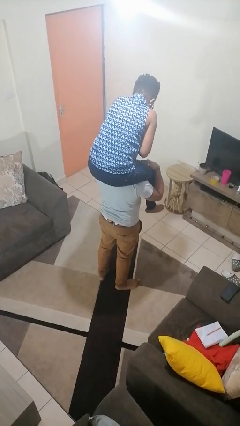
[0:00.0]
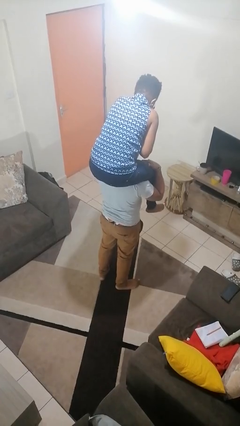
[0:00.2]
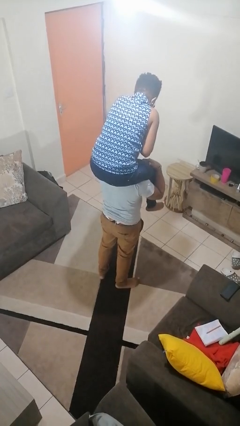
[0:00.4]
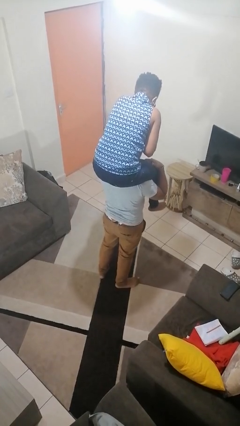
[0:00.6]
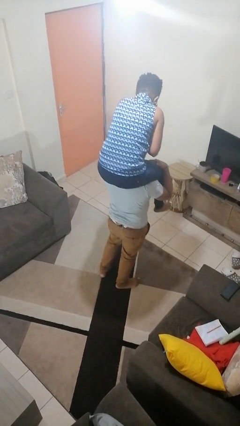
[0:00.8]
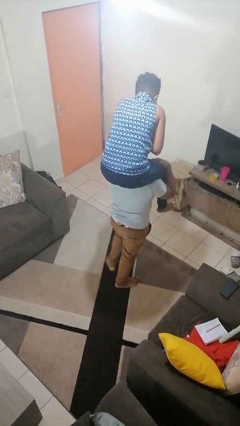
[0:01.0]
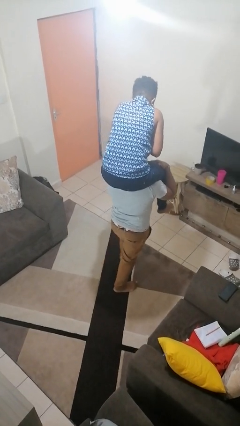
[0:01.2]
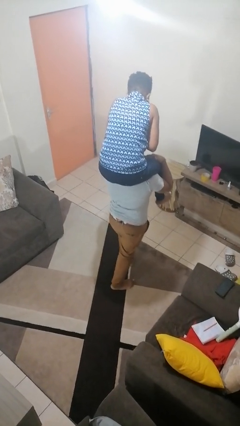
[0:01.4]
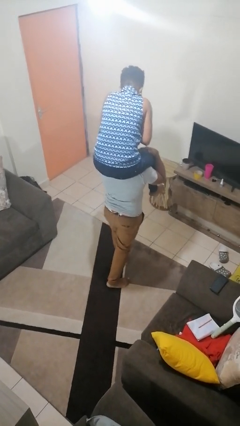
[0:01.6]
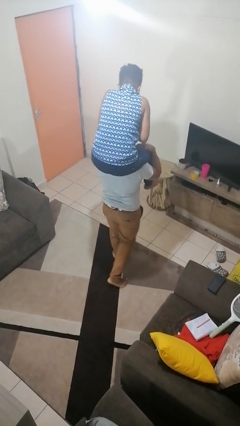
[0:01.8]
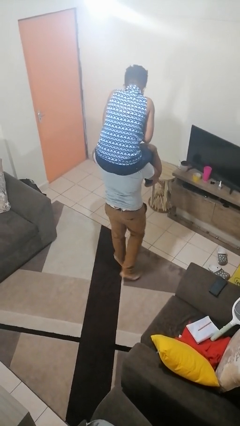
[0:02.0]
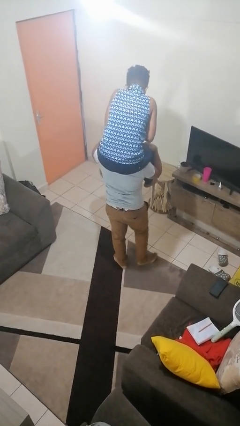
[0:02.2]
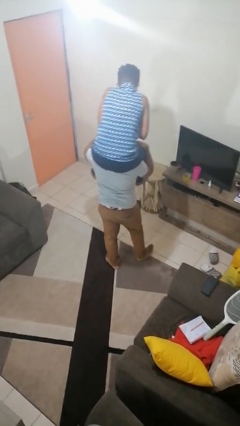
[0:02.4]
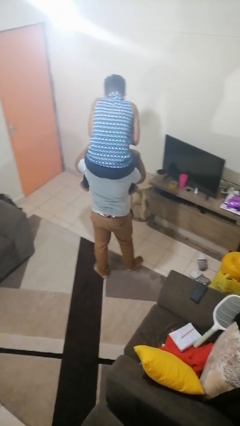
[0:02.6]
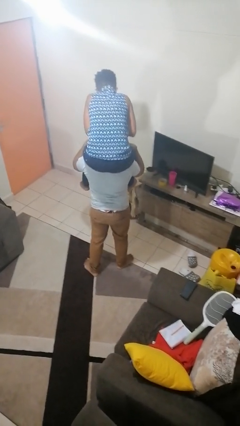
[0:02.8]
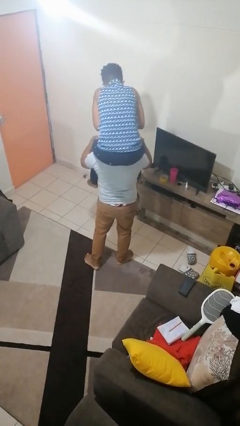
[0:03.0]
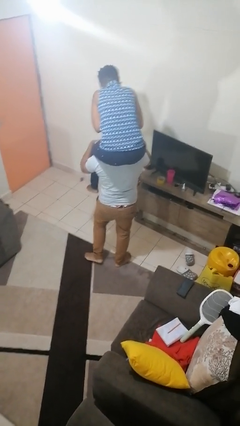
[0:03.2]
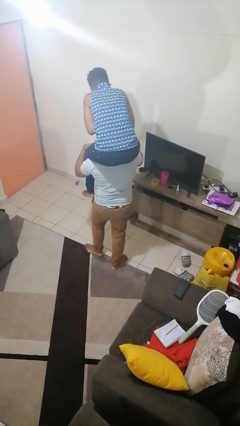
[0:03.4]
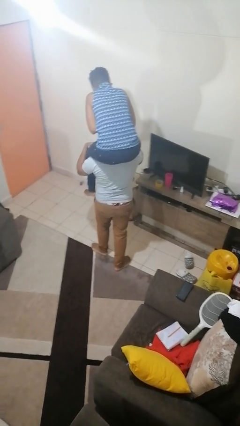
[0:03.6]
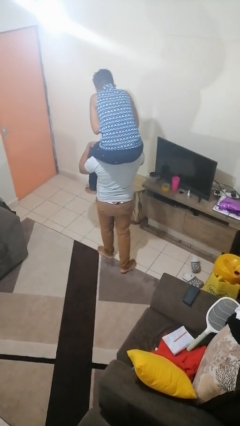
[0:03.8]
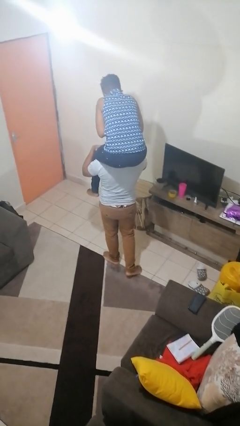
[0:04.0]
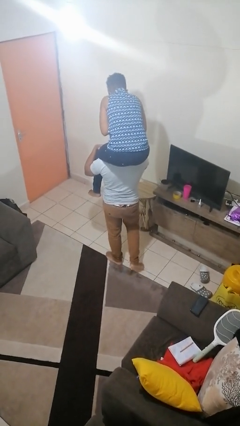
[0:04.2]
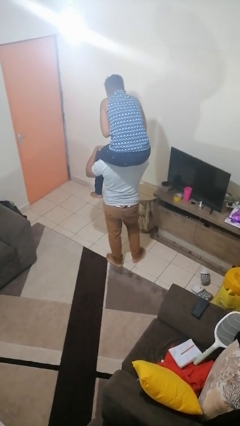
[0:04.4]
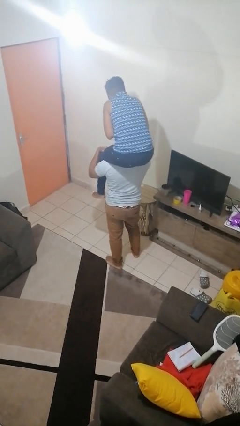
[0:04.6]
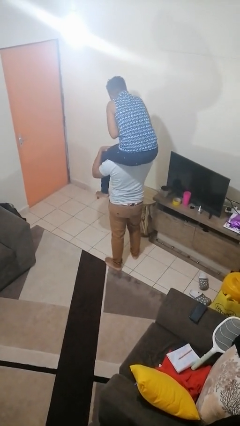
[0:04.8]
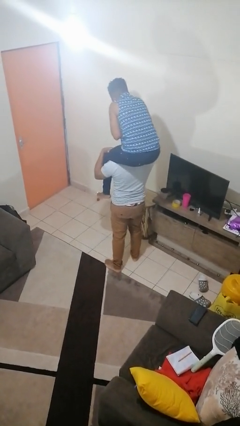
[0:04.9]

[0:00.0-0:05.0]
person carries person on shoulders

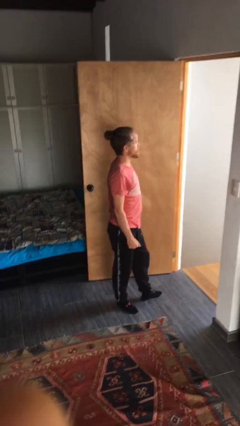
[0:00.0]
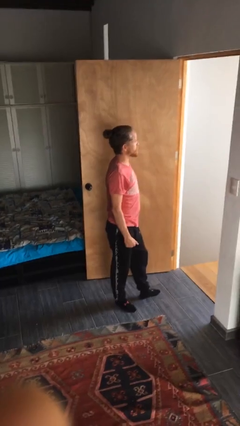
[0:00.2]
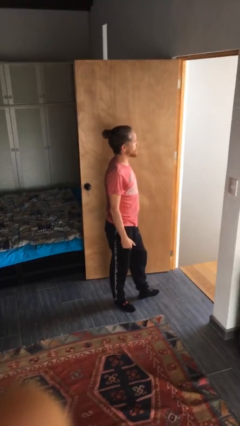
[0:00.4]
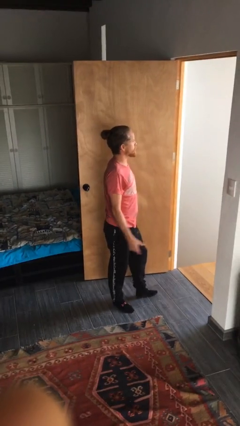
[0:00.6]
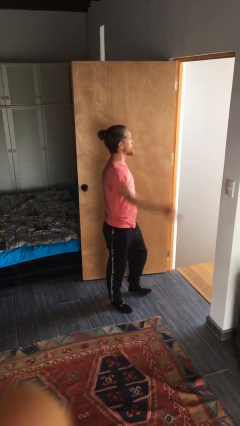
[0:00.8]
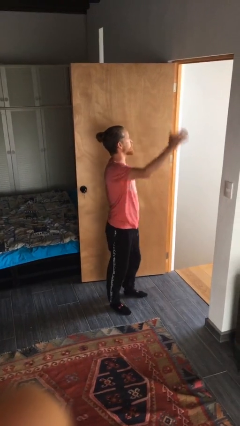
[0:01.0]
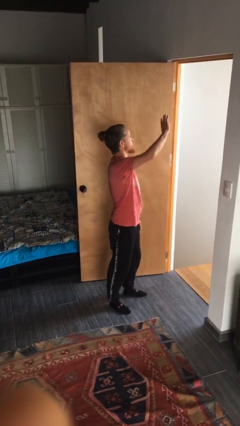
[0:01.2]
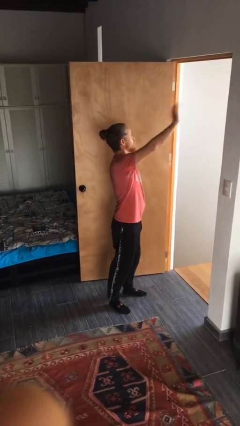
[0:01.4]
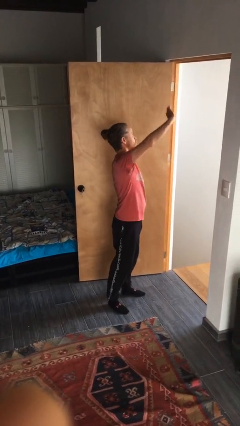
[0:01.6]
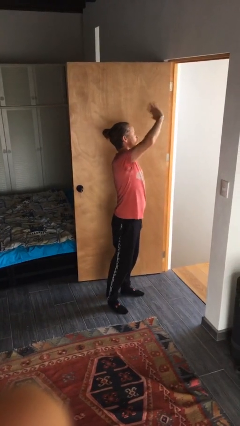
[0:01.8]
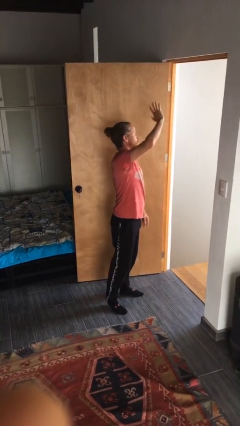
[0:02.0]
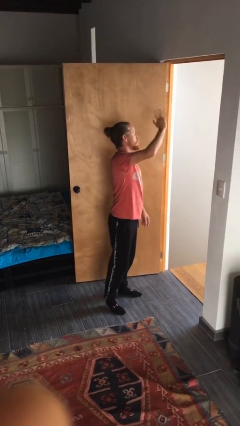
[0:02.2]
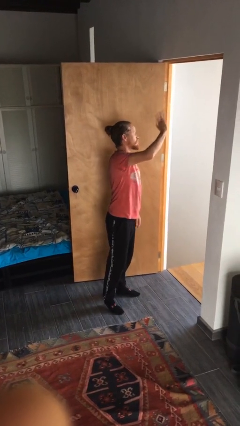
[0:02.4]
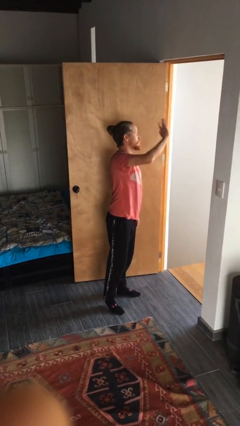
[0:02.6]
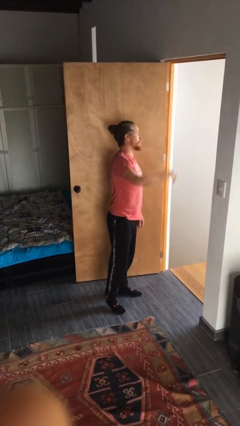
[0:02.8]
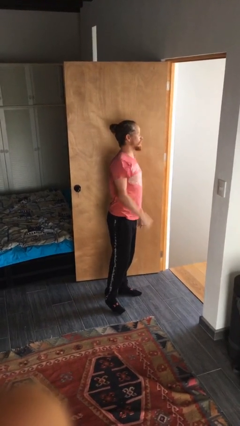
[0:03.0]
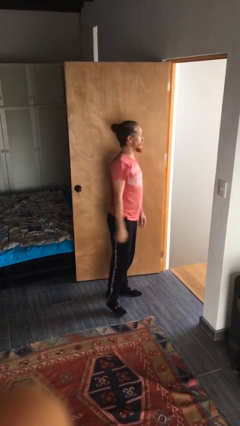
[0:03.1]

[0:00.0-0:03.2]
person waves at person

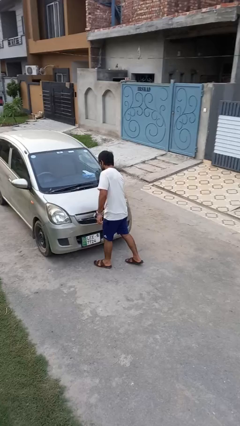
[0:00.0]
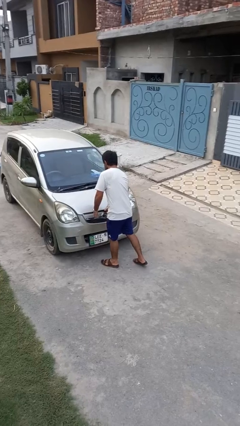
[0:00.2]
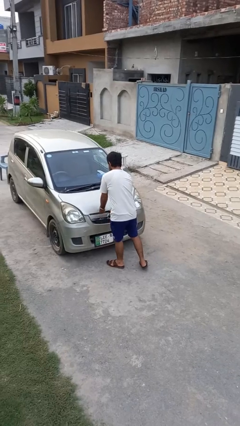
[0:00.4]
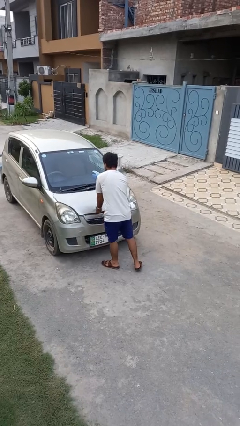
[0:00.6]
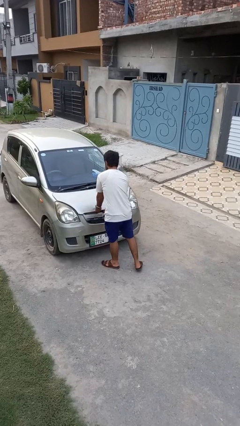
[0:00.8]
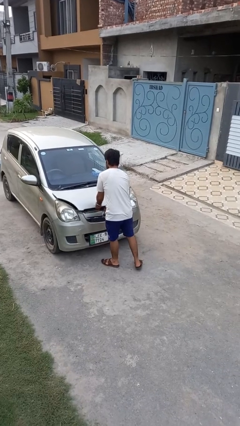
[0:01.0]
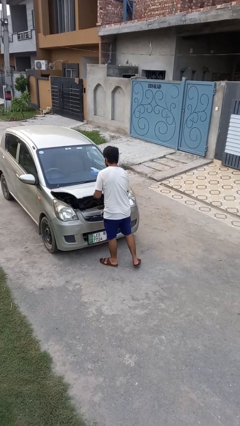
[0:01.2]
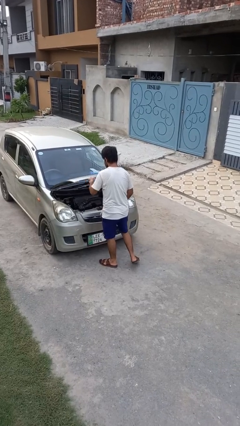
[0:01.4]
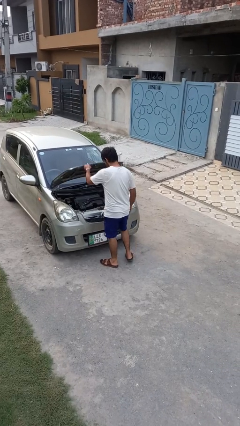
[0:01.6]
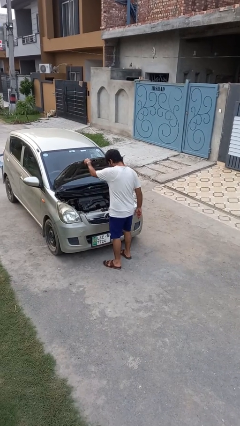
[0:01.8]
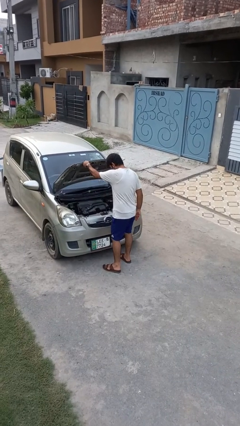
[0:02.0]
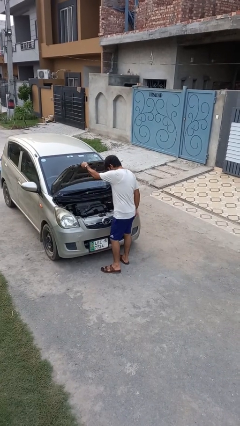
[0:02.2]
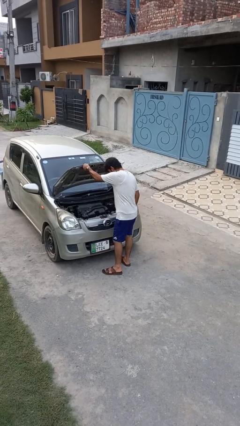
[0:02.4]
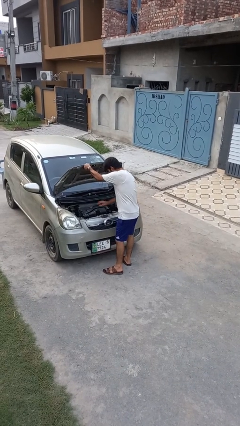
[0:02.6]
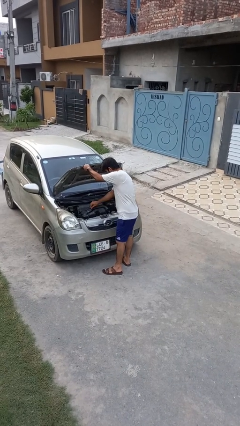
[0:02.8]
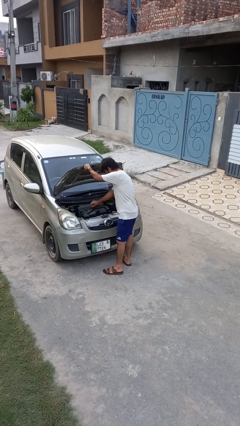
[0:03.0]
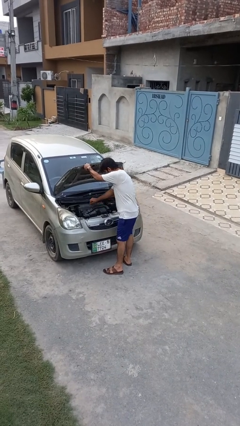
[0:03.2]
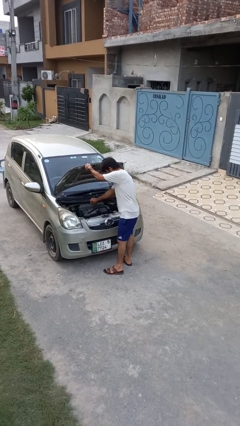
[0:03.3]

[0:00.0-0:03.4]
person opens car hood

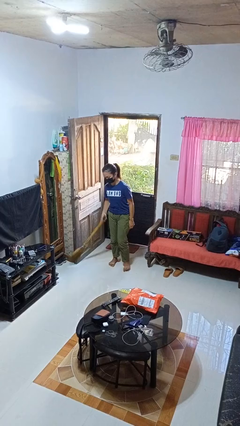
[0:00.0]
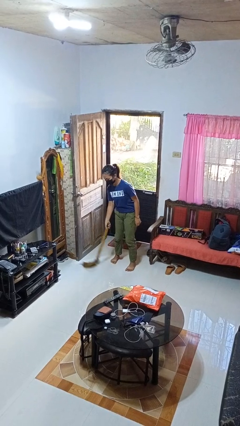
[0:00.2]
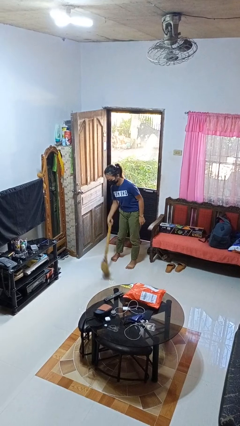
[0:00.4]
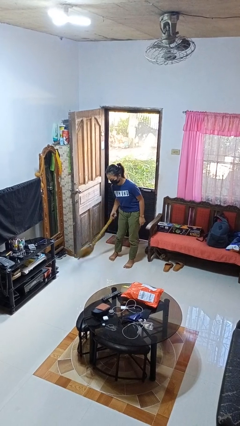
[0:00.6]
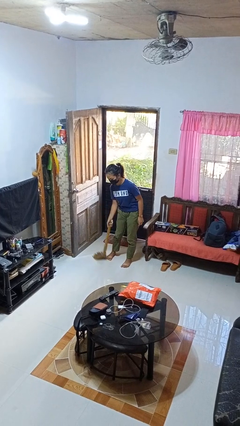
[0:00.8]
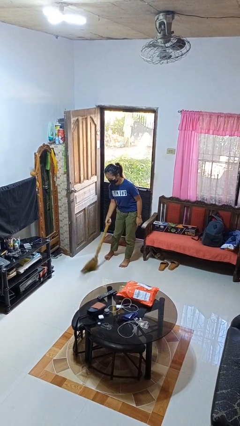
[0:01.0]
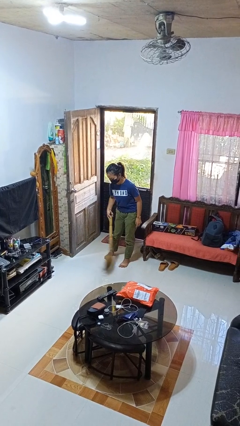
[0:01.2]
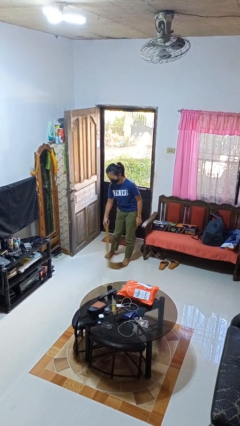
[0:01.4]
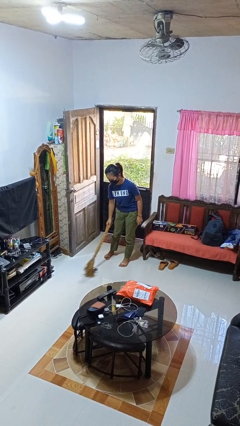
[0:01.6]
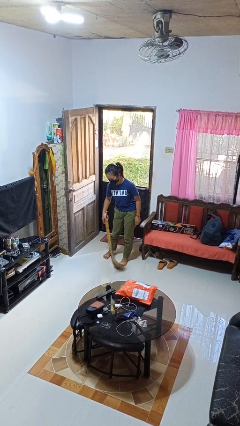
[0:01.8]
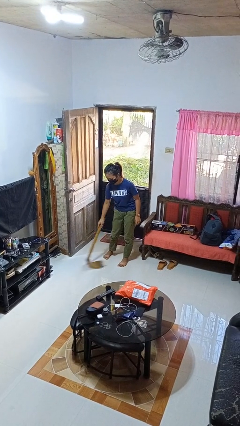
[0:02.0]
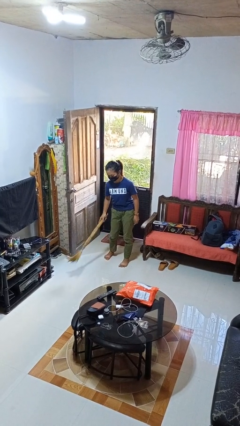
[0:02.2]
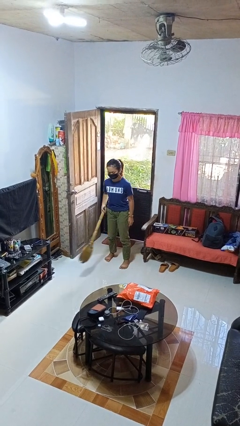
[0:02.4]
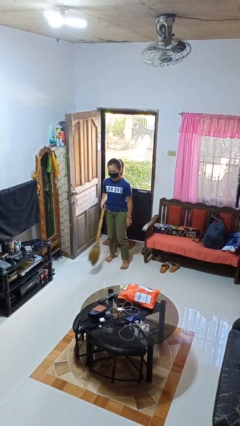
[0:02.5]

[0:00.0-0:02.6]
person sweeps floor

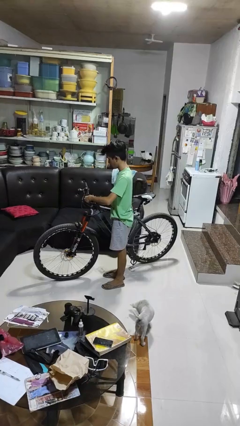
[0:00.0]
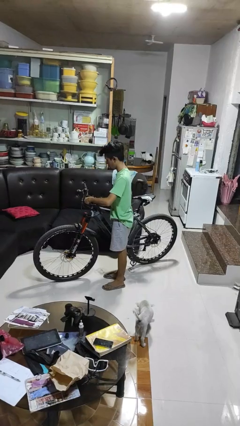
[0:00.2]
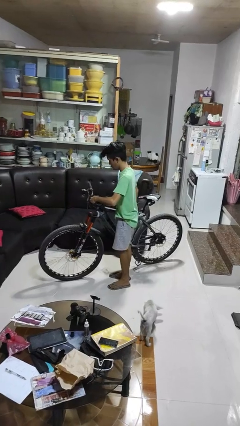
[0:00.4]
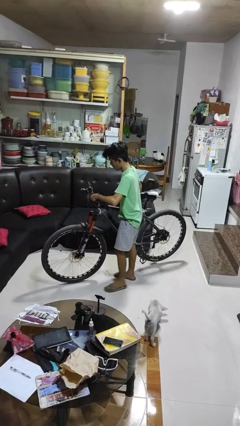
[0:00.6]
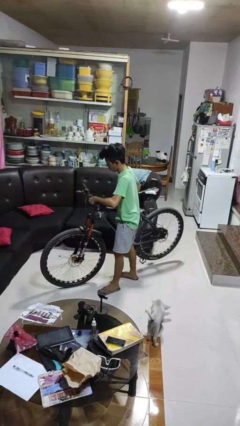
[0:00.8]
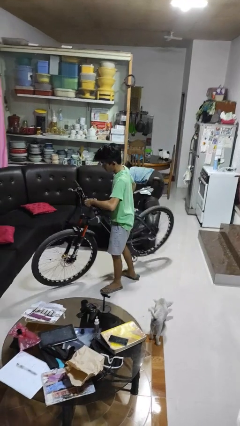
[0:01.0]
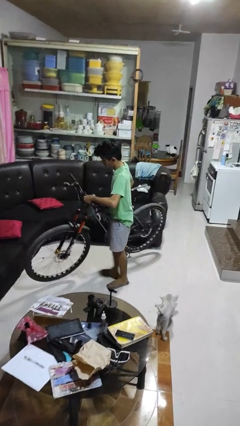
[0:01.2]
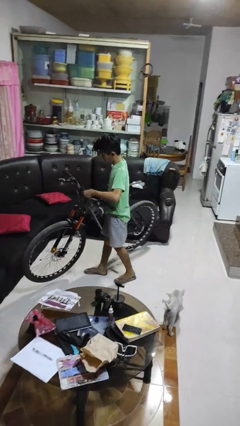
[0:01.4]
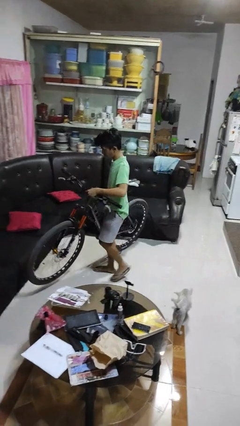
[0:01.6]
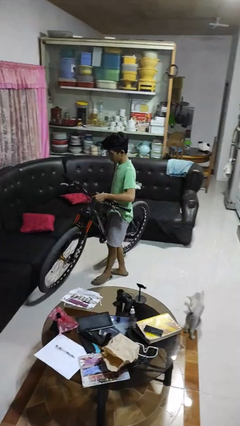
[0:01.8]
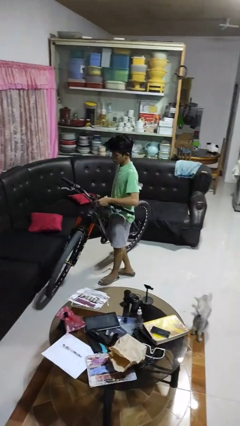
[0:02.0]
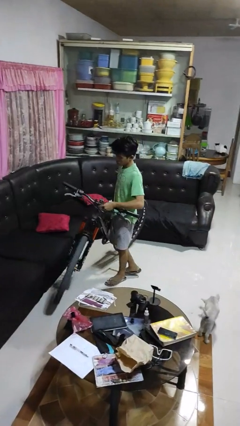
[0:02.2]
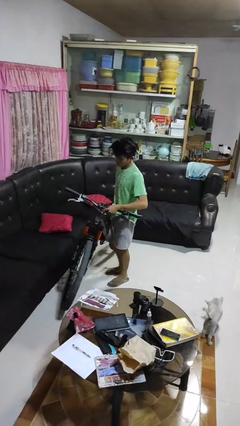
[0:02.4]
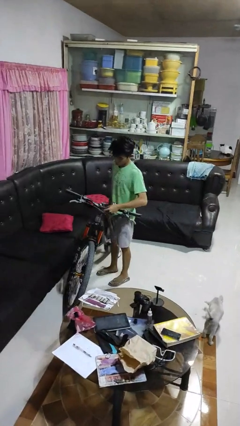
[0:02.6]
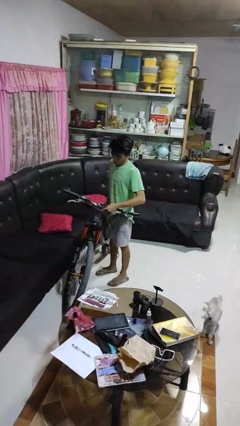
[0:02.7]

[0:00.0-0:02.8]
person carries bicycle

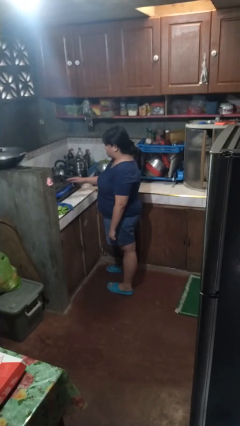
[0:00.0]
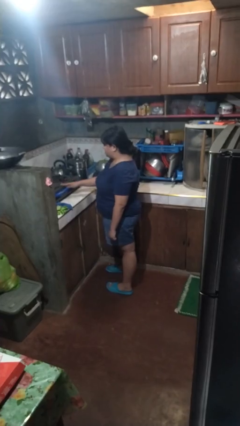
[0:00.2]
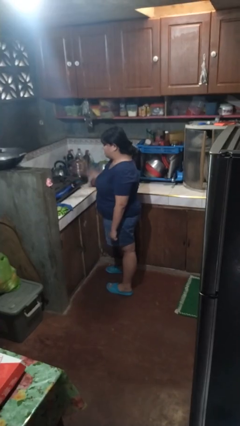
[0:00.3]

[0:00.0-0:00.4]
person burns hand
